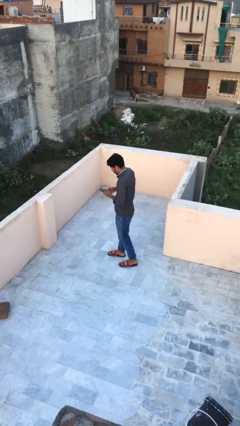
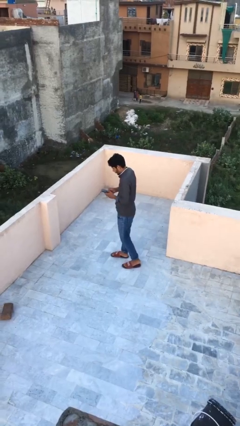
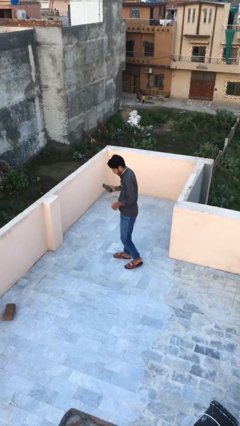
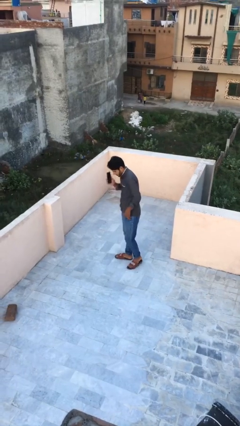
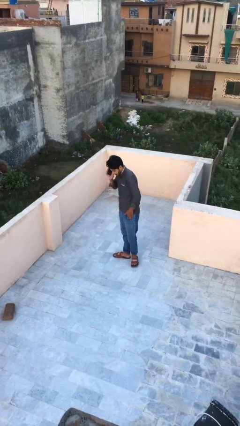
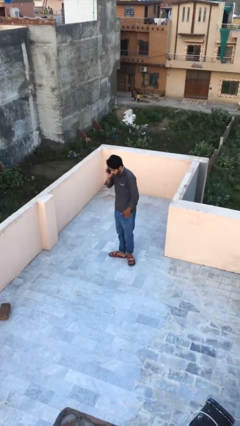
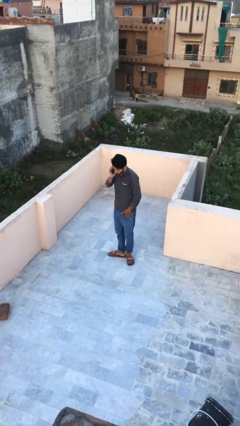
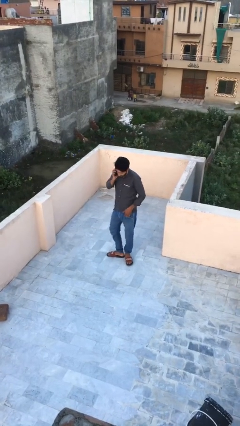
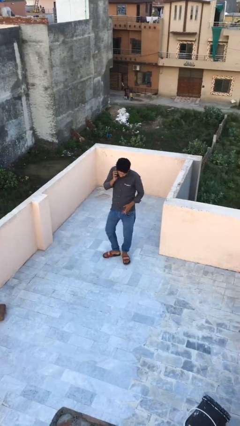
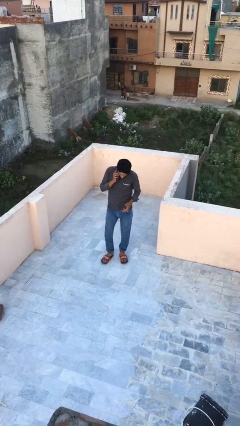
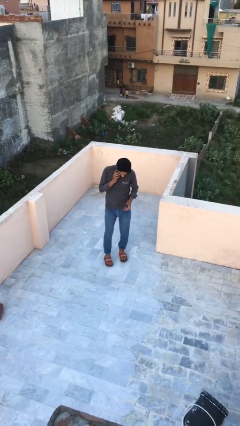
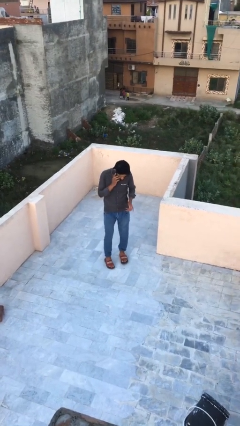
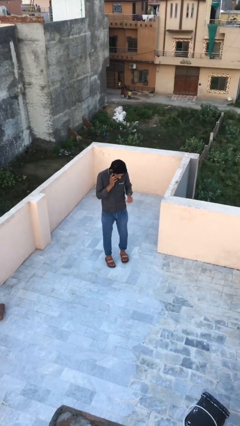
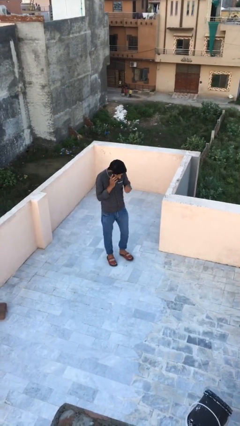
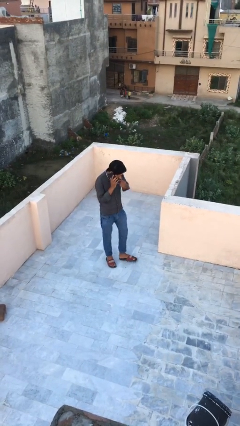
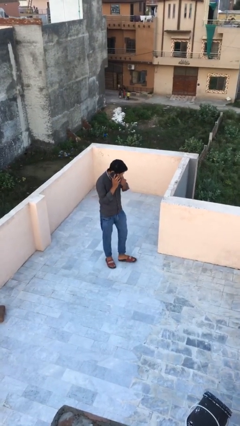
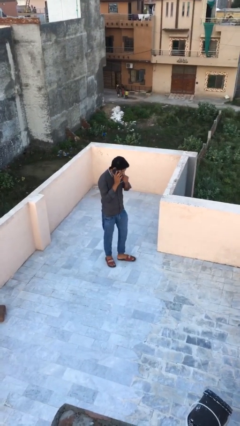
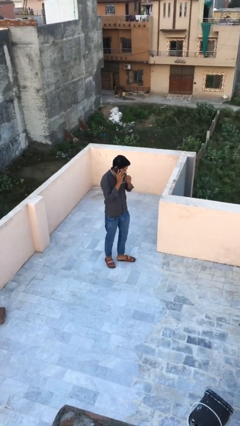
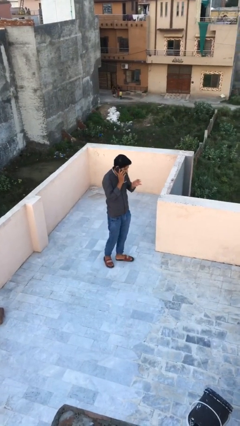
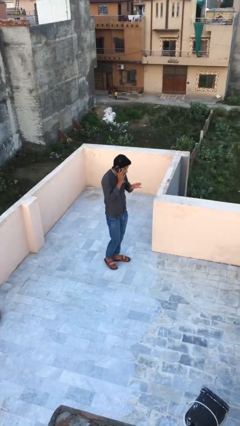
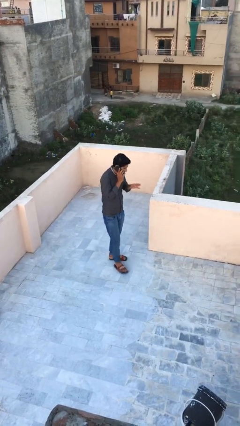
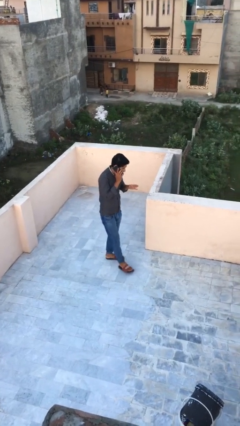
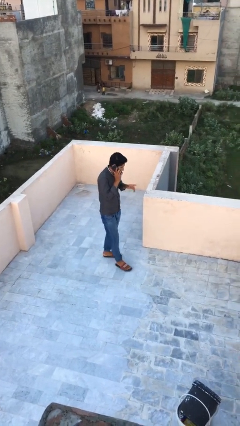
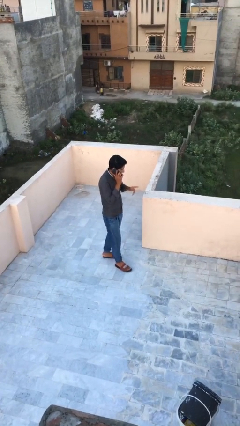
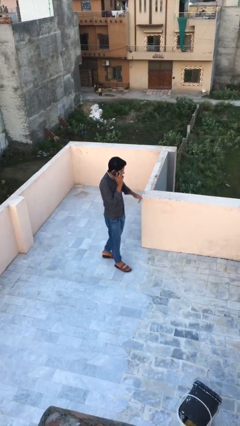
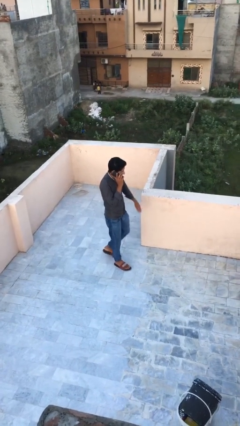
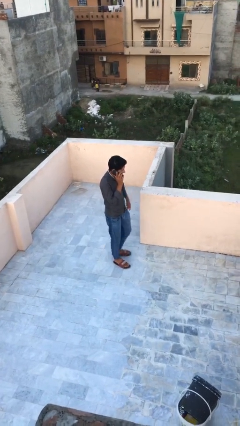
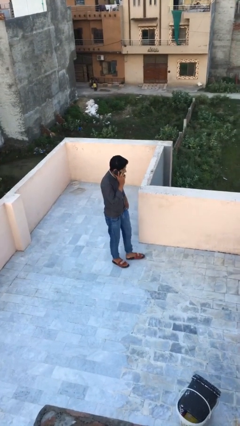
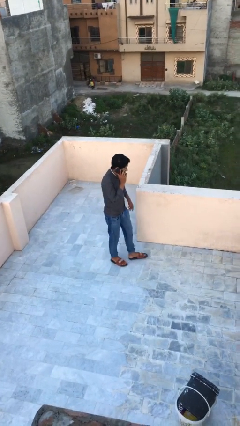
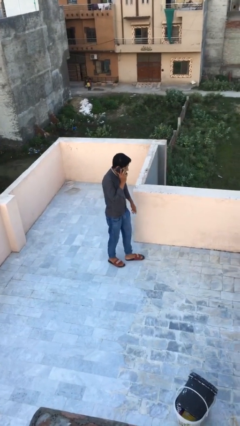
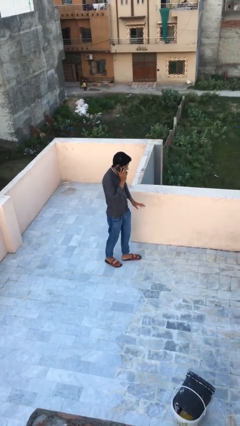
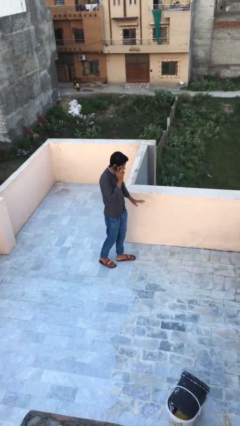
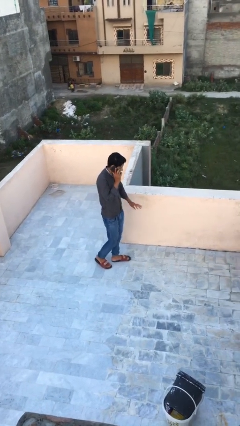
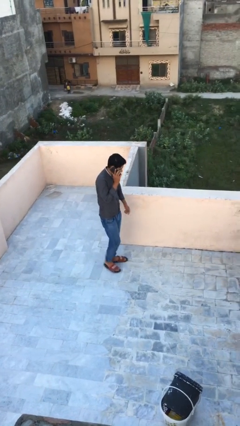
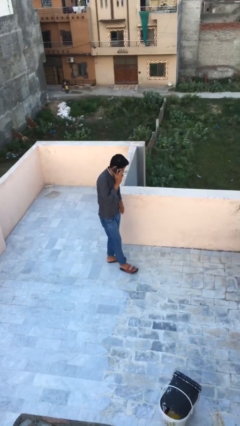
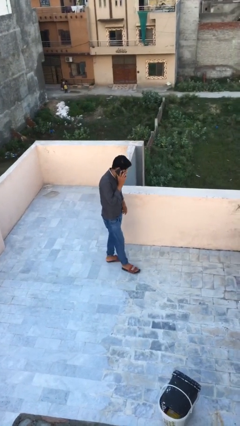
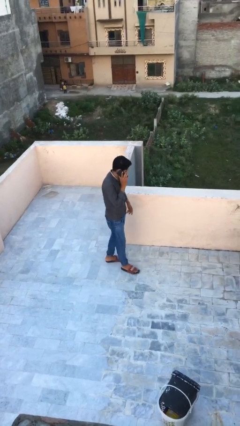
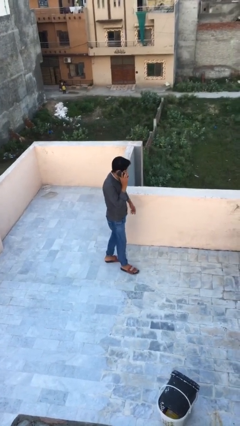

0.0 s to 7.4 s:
person talks on phone

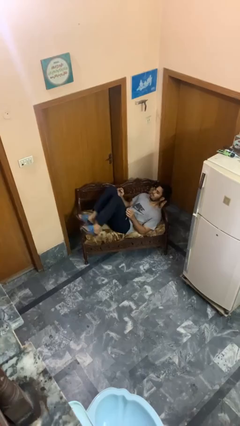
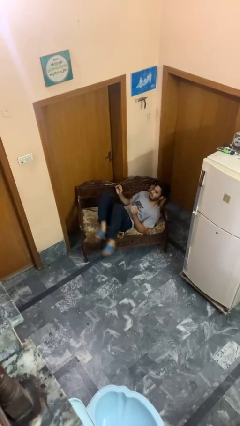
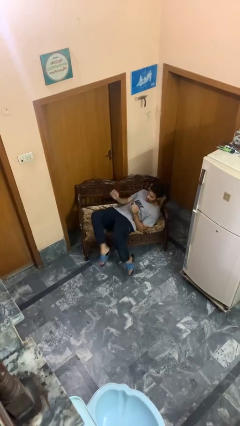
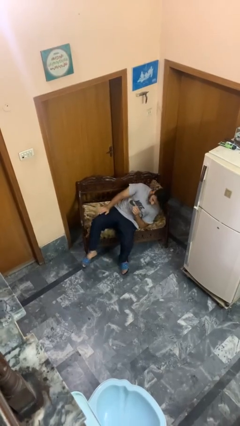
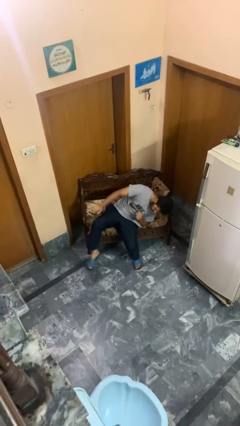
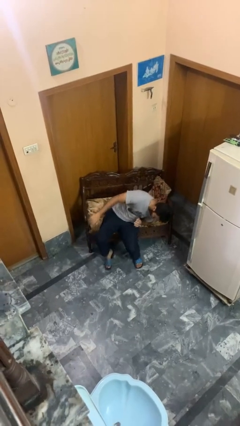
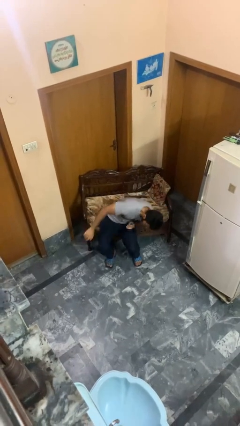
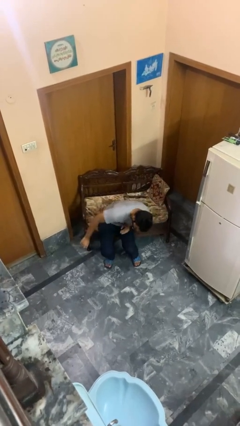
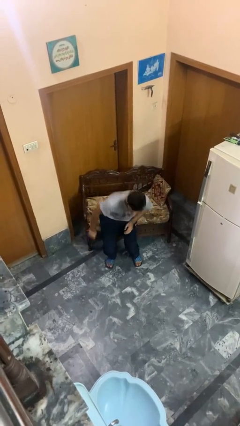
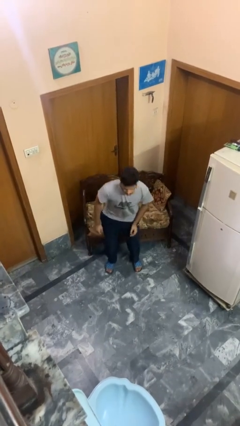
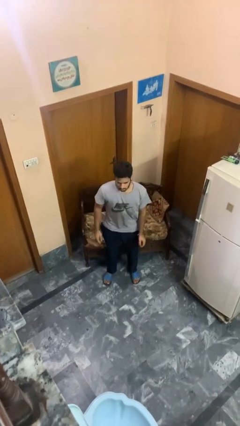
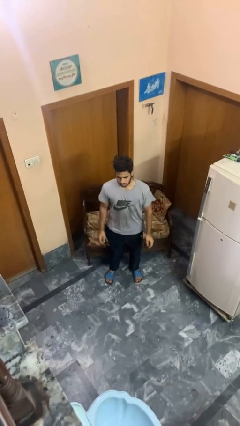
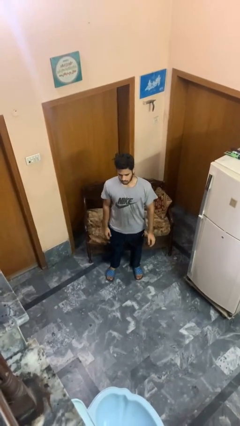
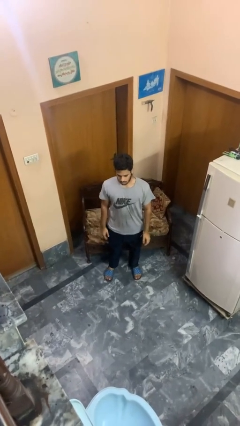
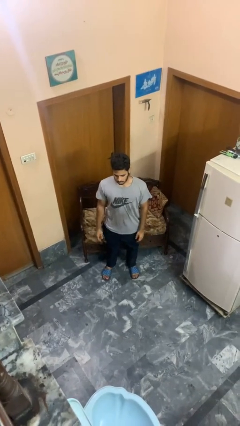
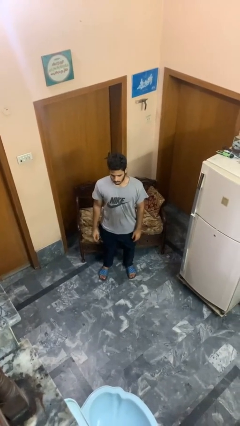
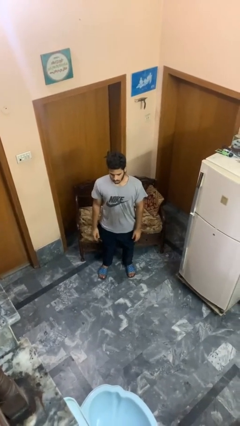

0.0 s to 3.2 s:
person stands up

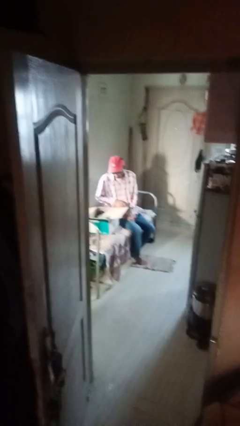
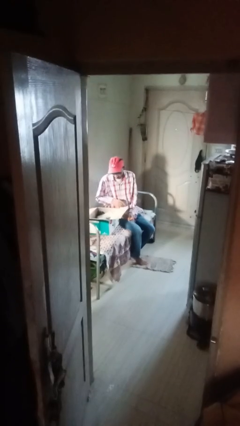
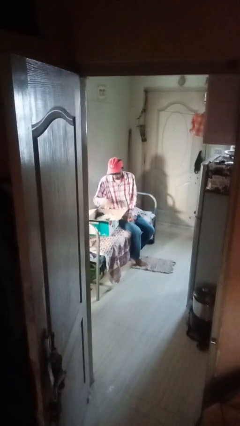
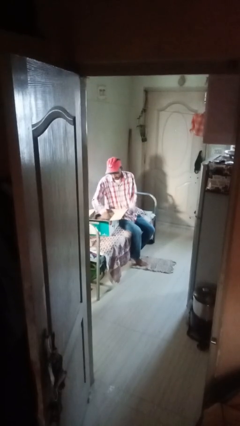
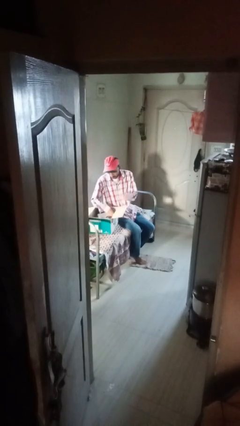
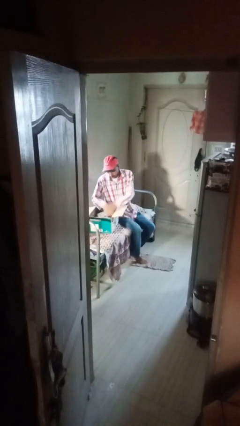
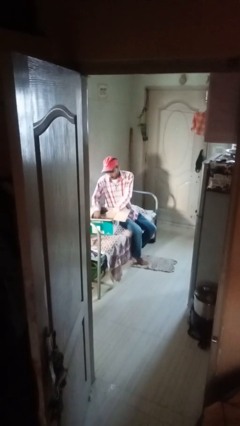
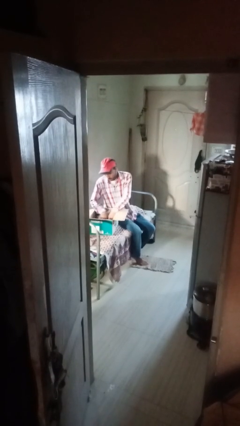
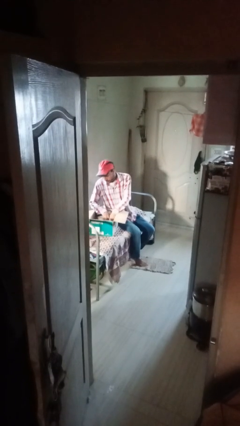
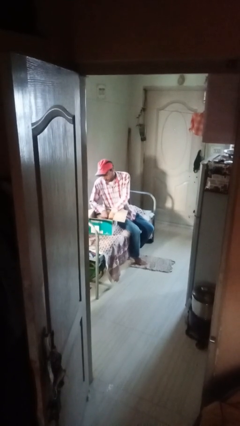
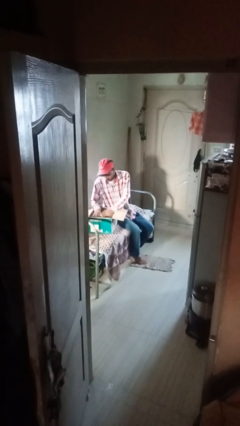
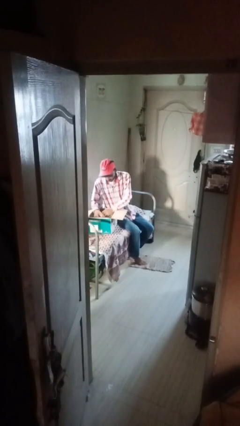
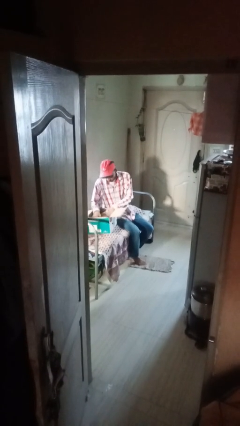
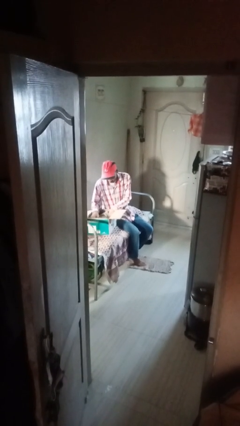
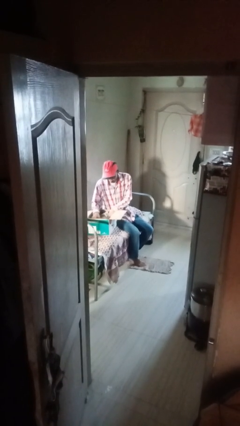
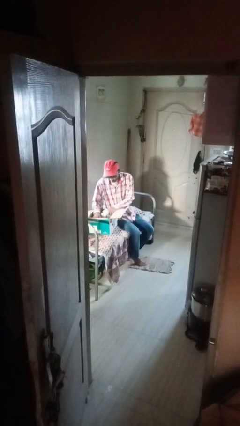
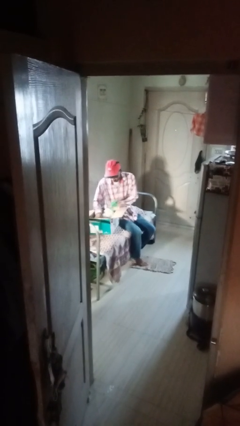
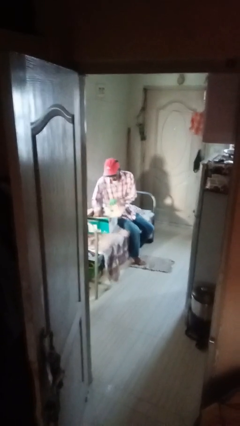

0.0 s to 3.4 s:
person searches in box

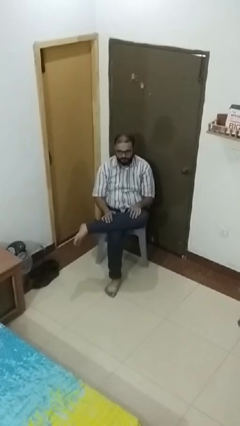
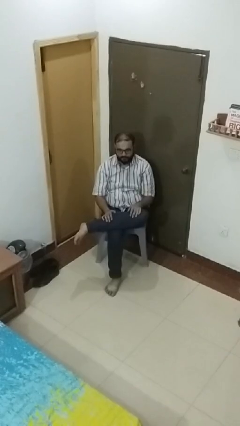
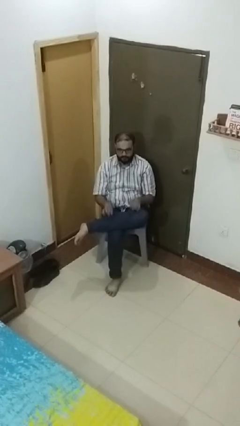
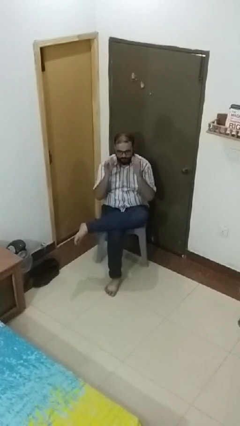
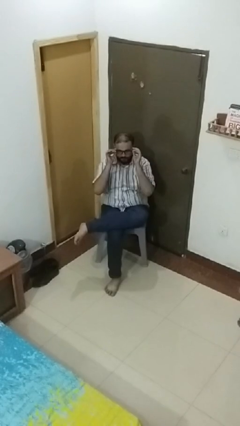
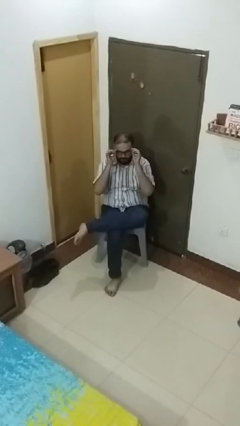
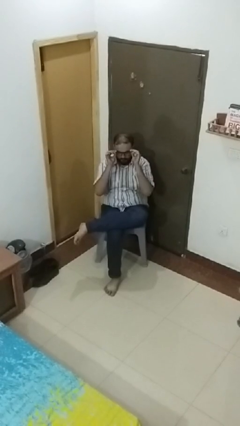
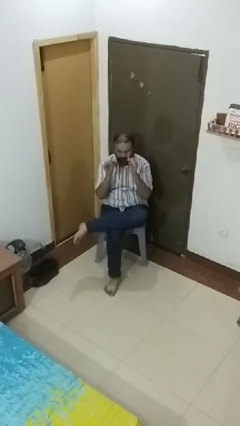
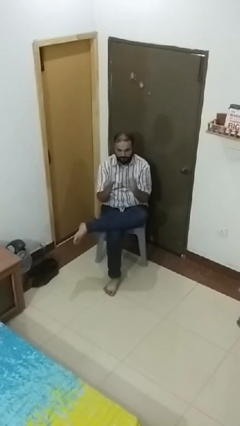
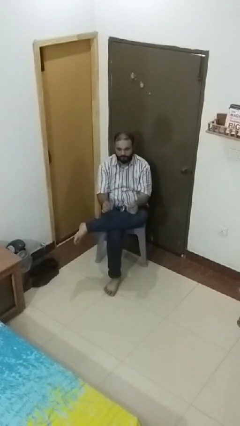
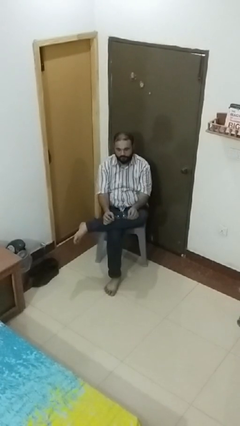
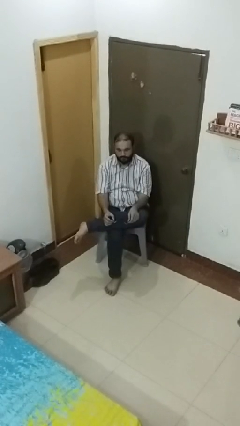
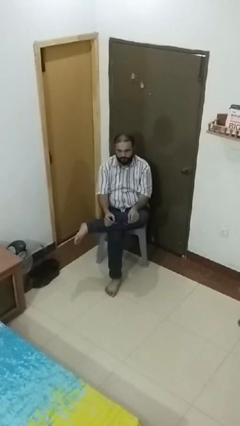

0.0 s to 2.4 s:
person takes off glasses

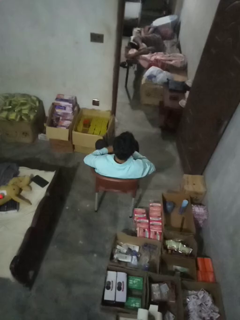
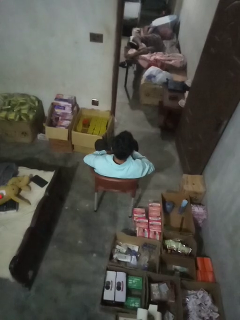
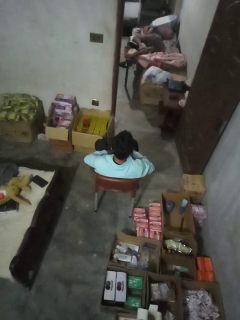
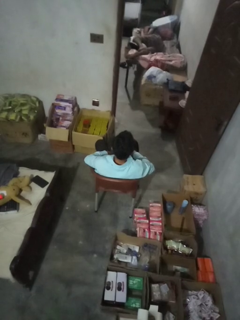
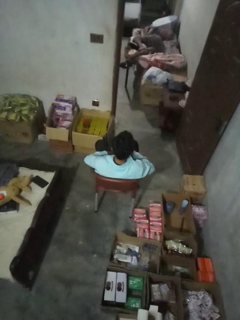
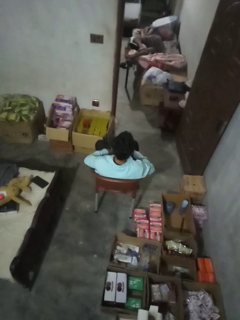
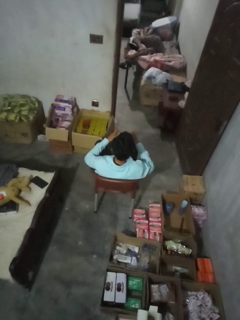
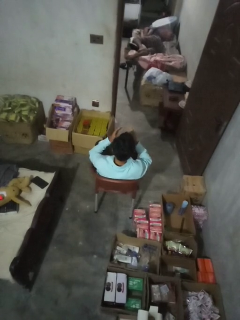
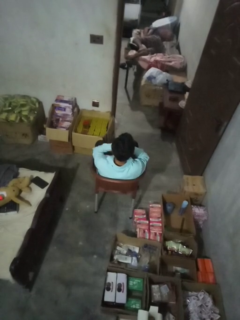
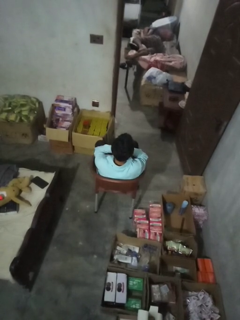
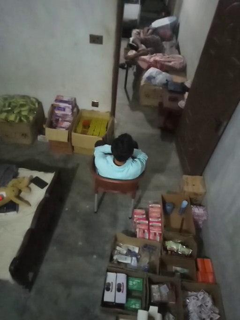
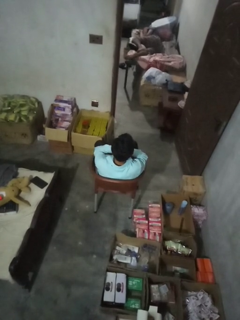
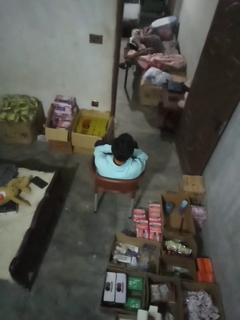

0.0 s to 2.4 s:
person covers face with hands
